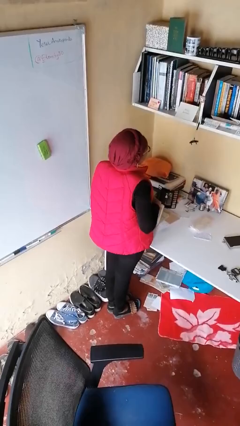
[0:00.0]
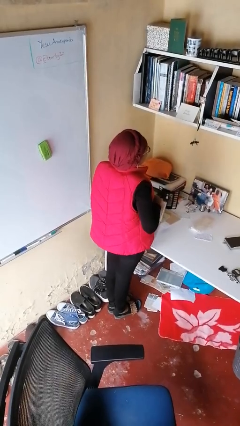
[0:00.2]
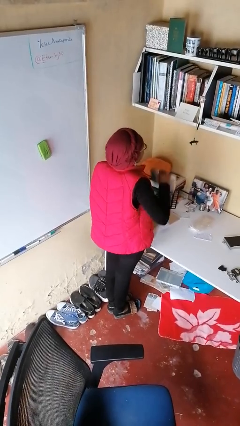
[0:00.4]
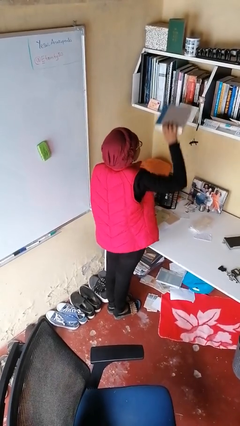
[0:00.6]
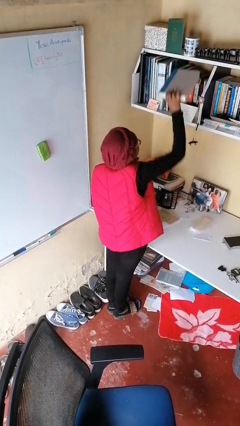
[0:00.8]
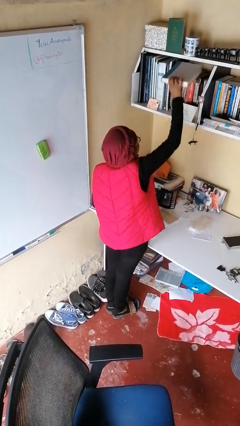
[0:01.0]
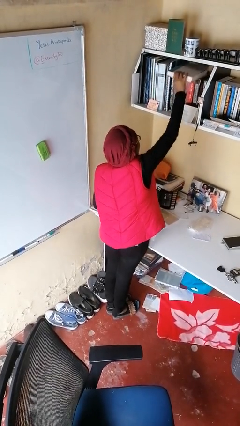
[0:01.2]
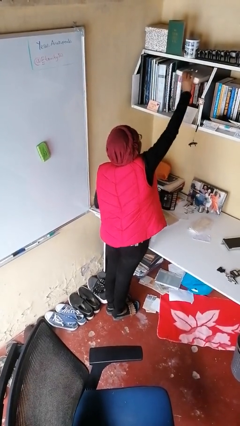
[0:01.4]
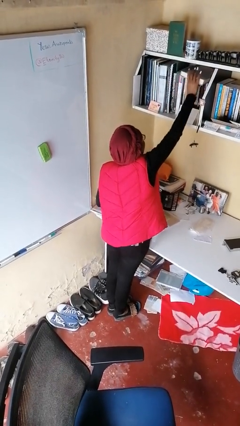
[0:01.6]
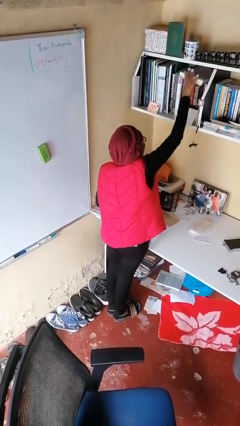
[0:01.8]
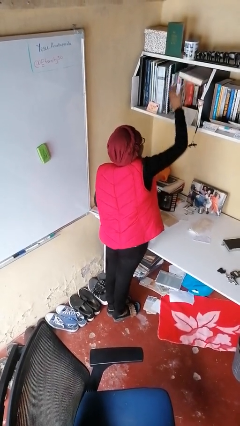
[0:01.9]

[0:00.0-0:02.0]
person puts down object on shelf

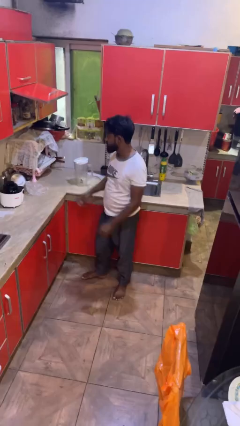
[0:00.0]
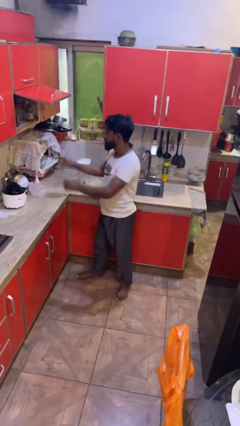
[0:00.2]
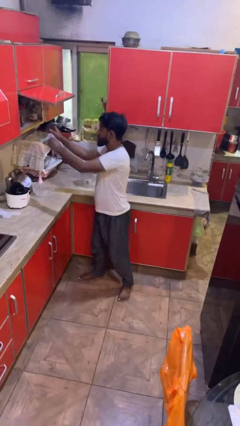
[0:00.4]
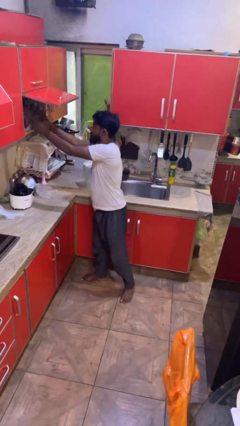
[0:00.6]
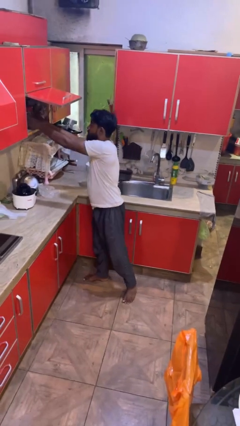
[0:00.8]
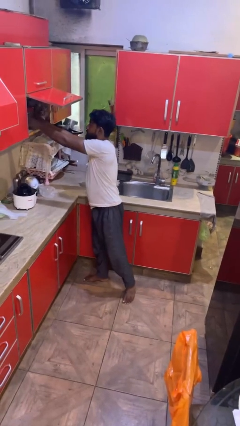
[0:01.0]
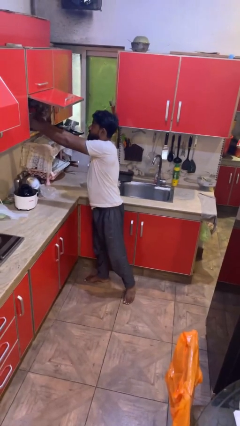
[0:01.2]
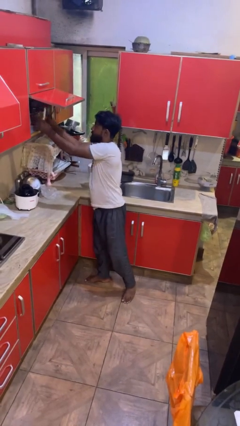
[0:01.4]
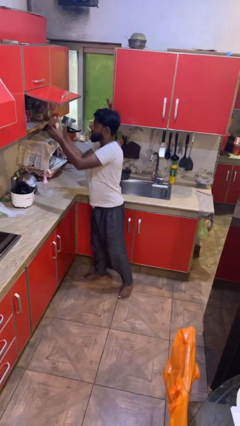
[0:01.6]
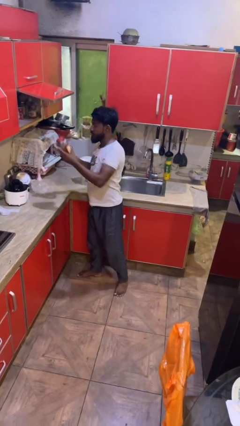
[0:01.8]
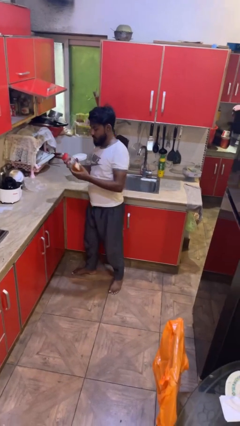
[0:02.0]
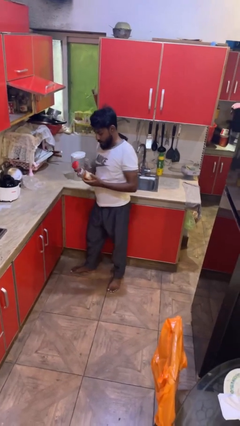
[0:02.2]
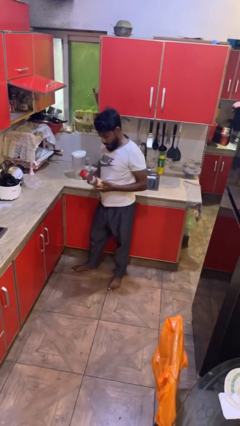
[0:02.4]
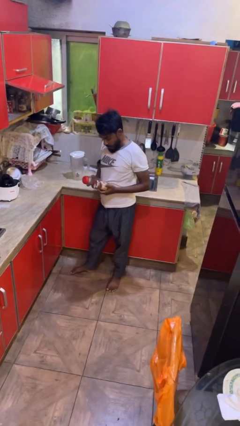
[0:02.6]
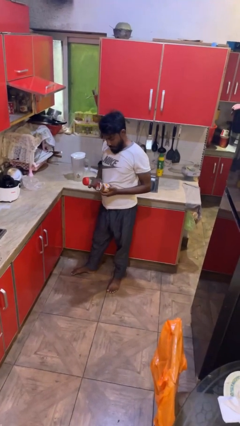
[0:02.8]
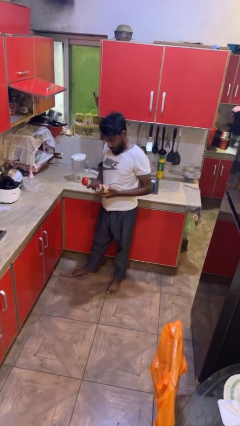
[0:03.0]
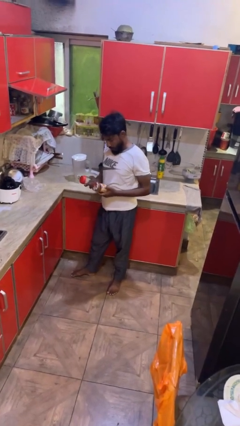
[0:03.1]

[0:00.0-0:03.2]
person picks up object from cabinet

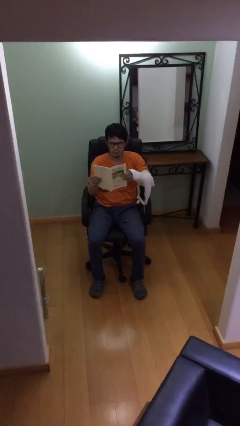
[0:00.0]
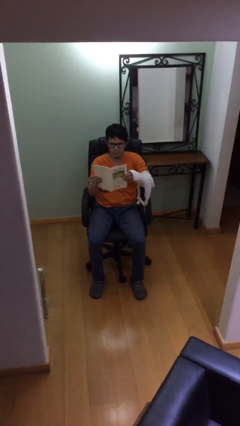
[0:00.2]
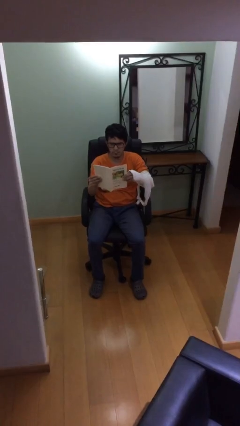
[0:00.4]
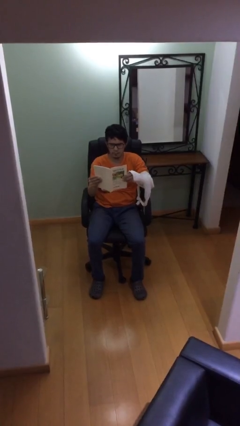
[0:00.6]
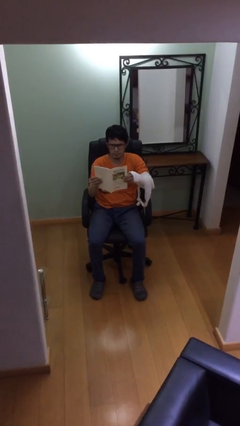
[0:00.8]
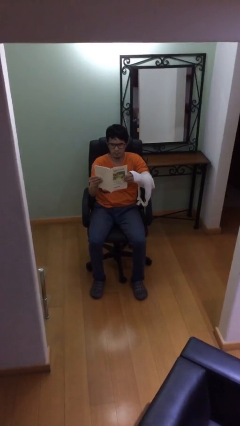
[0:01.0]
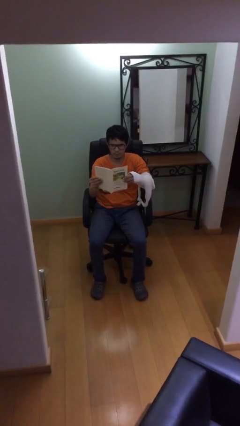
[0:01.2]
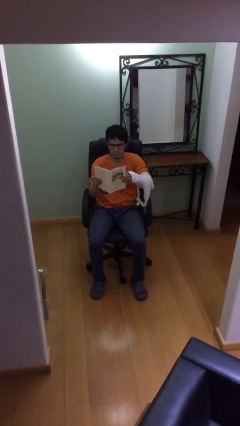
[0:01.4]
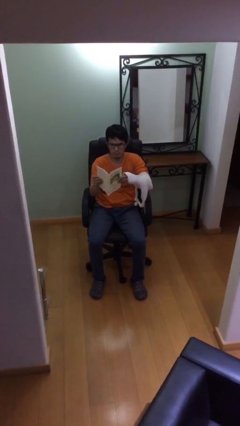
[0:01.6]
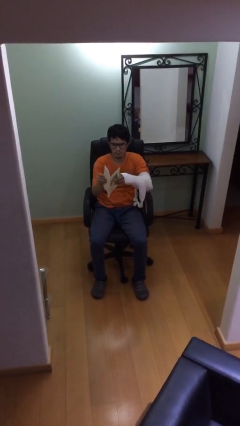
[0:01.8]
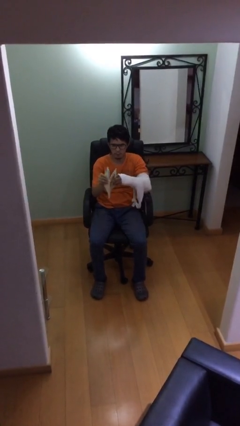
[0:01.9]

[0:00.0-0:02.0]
person reads document

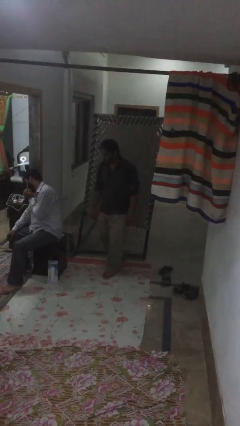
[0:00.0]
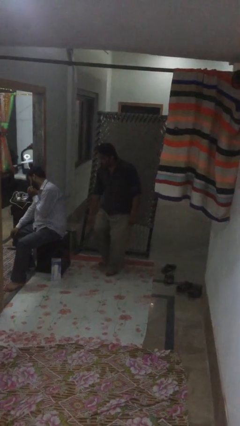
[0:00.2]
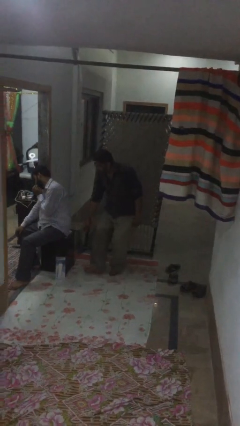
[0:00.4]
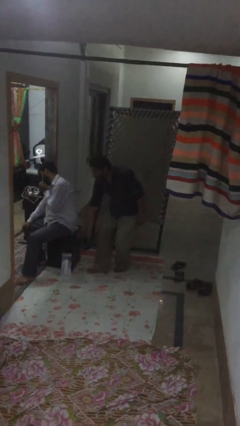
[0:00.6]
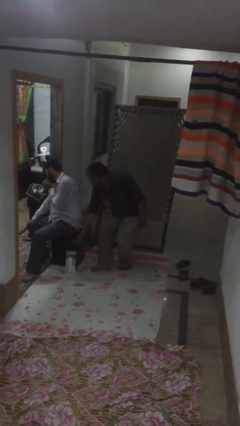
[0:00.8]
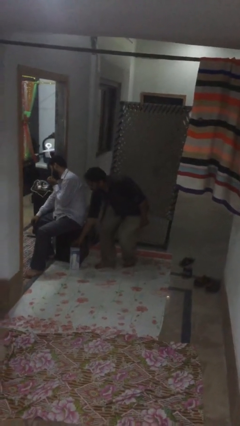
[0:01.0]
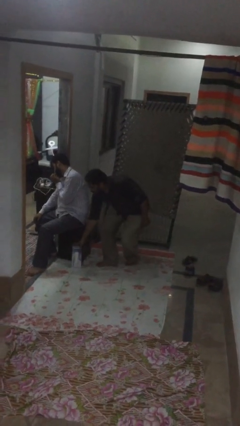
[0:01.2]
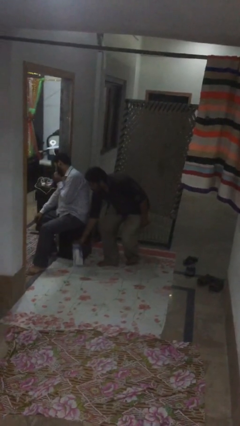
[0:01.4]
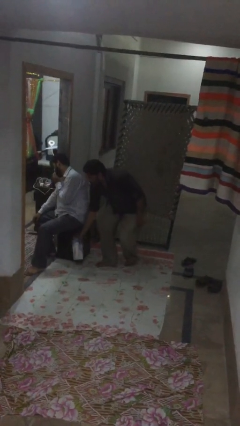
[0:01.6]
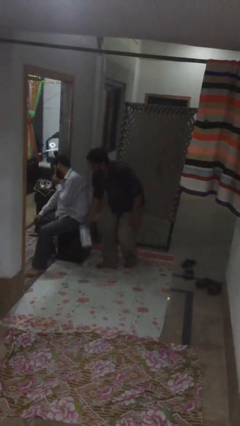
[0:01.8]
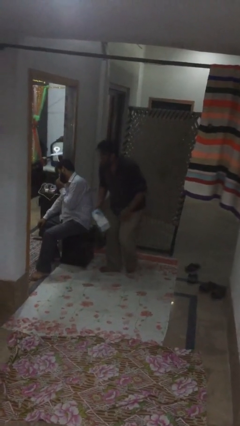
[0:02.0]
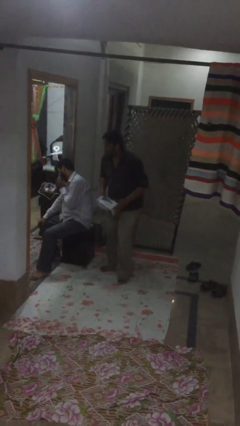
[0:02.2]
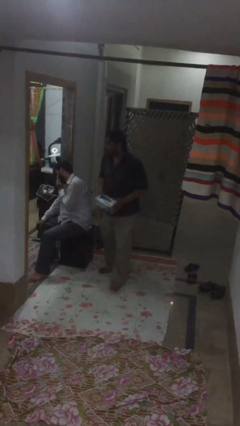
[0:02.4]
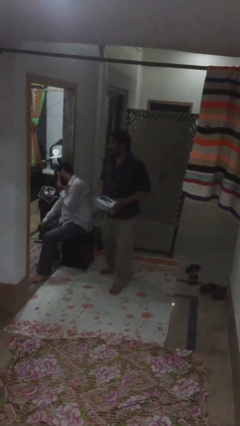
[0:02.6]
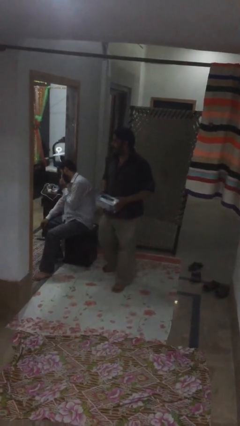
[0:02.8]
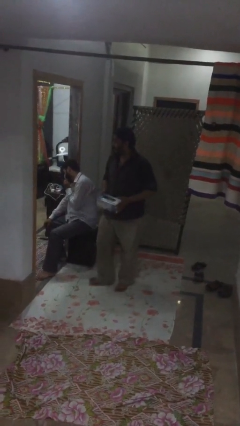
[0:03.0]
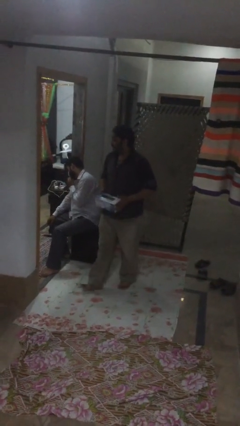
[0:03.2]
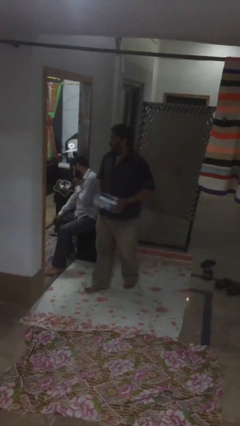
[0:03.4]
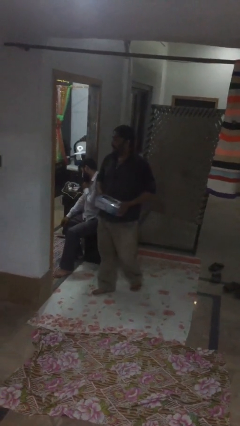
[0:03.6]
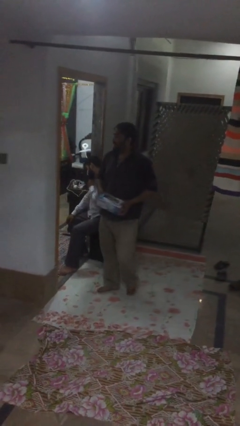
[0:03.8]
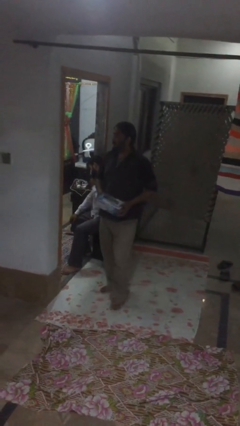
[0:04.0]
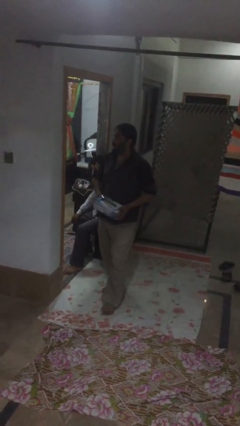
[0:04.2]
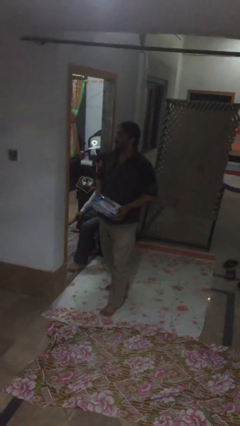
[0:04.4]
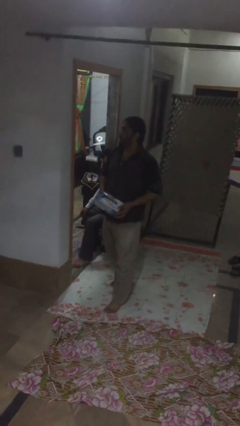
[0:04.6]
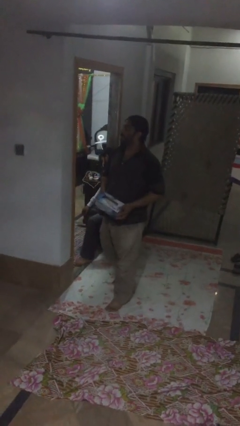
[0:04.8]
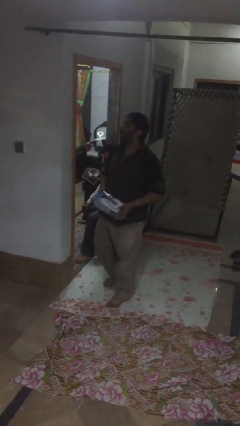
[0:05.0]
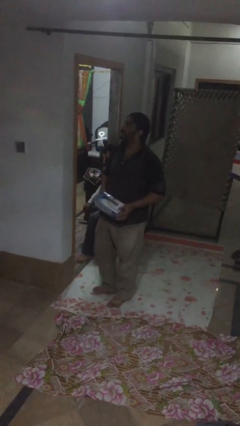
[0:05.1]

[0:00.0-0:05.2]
person steals object from person

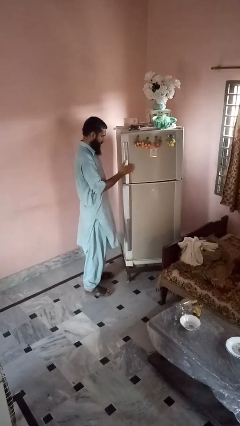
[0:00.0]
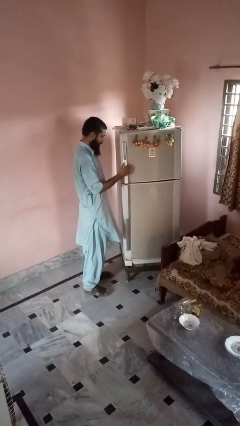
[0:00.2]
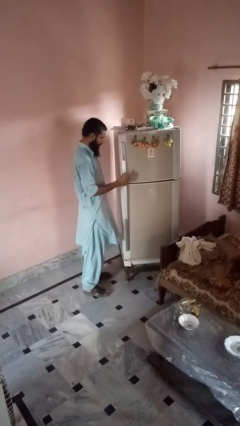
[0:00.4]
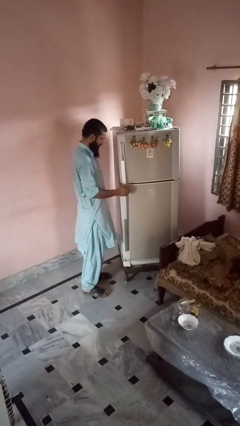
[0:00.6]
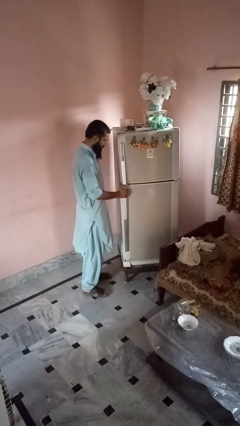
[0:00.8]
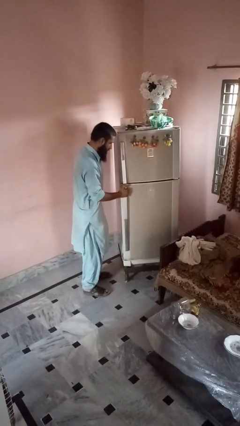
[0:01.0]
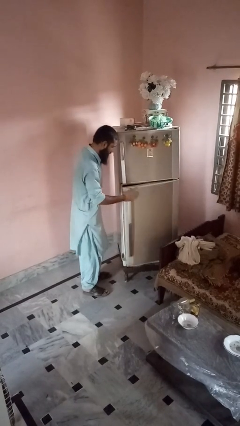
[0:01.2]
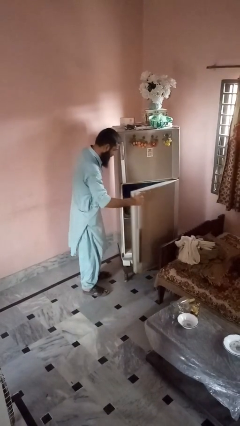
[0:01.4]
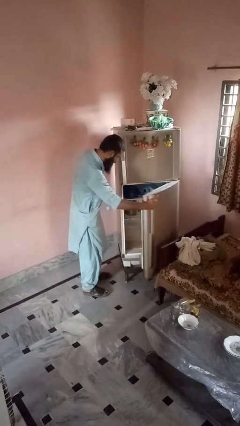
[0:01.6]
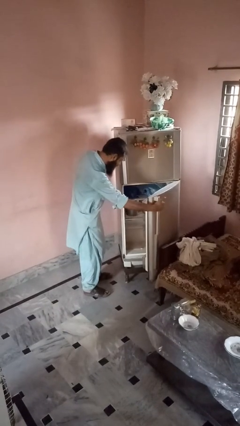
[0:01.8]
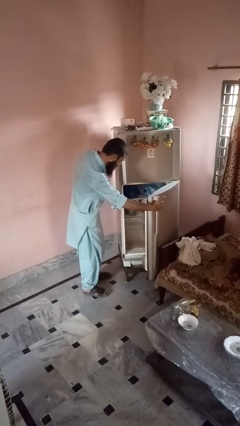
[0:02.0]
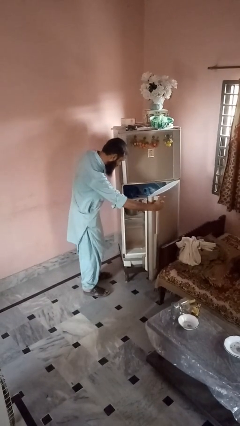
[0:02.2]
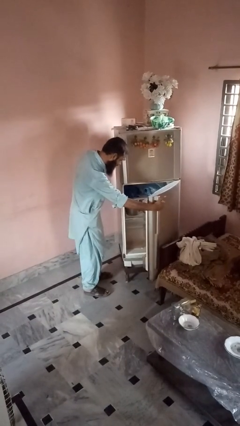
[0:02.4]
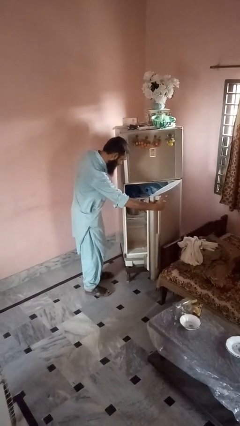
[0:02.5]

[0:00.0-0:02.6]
person opens refrigerator

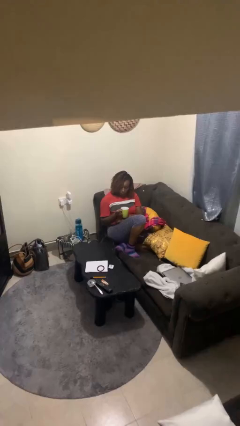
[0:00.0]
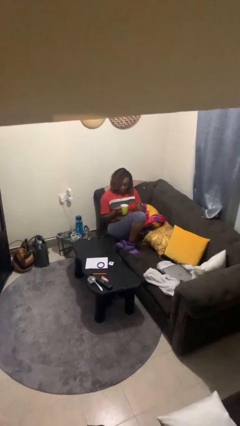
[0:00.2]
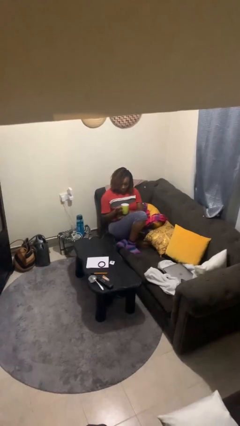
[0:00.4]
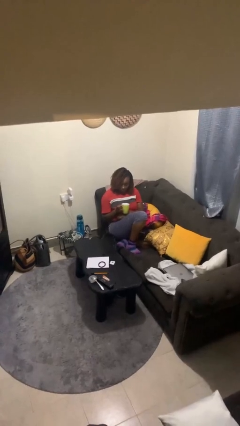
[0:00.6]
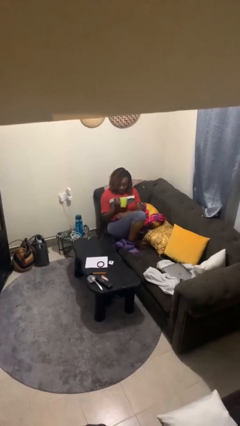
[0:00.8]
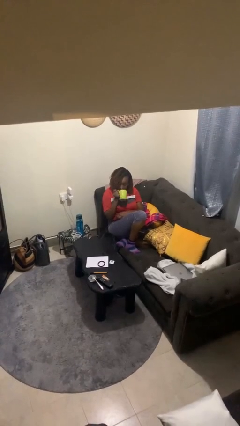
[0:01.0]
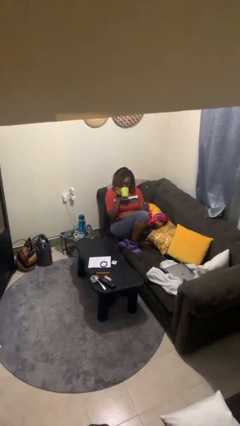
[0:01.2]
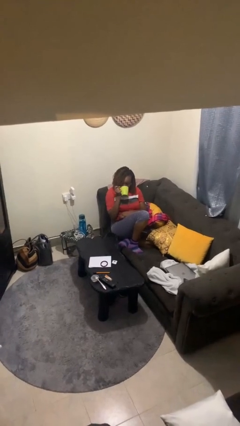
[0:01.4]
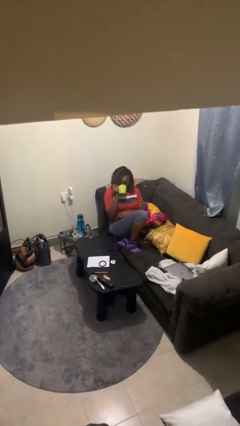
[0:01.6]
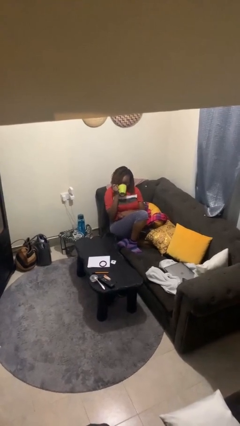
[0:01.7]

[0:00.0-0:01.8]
person drinks from mug

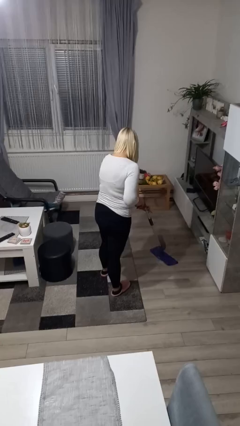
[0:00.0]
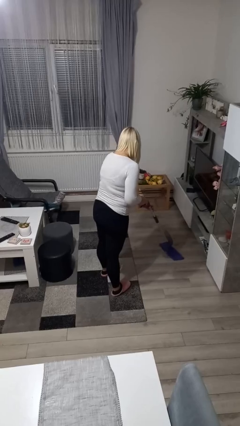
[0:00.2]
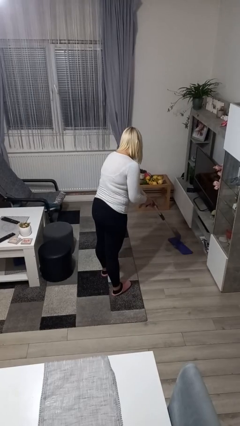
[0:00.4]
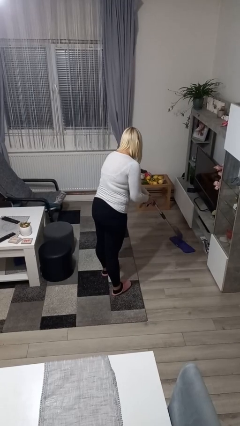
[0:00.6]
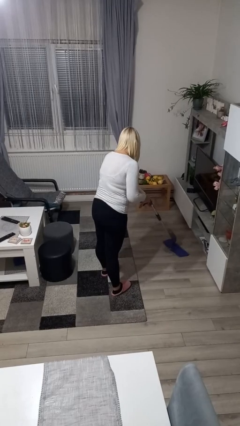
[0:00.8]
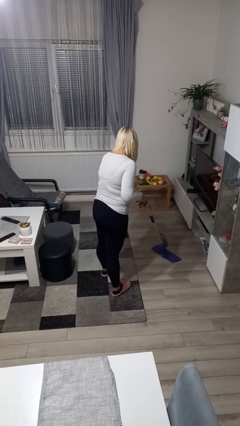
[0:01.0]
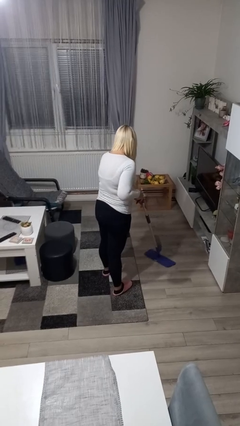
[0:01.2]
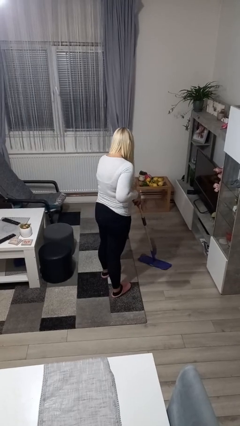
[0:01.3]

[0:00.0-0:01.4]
person mops
